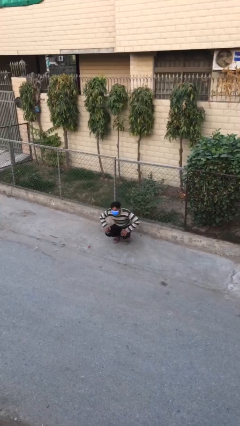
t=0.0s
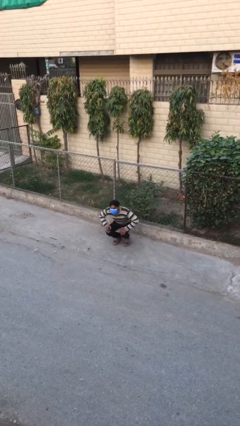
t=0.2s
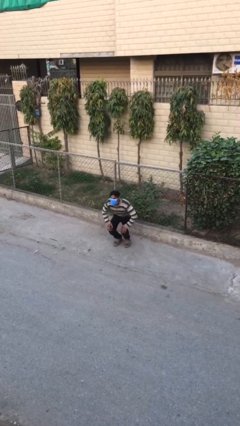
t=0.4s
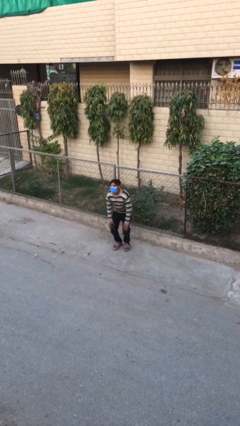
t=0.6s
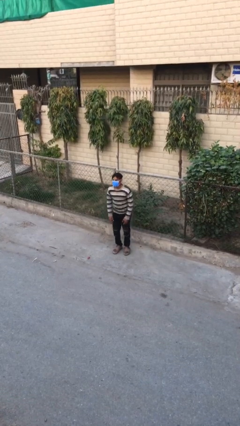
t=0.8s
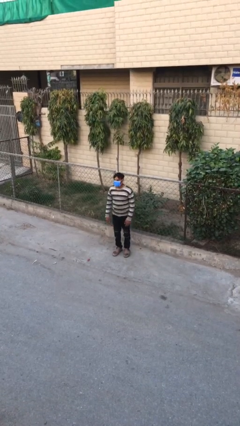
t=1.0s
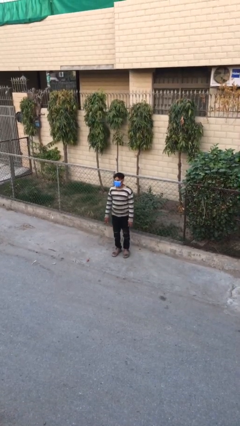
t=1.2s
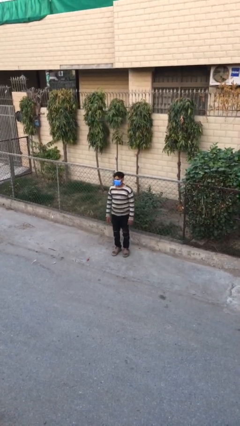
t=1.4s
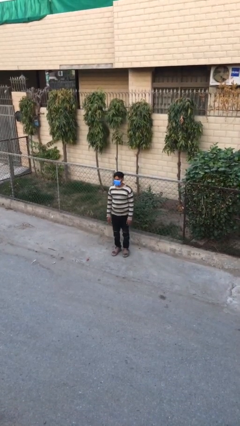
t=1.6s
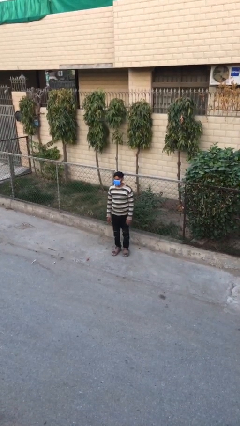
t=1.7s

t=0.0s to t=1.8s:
person stands up

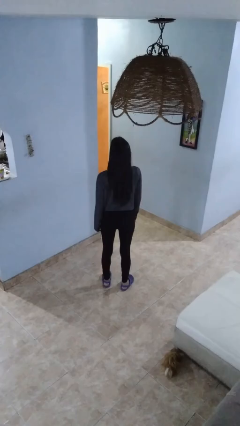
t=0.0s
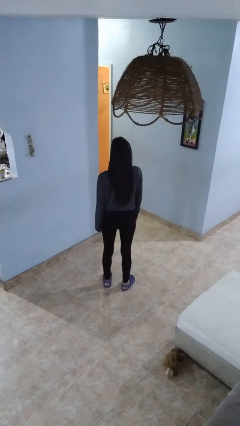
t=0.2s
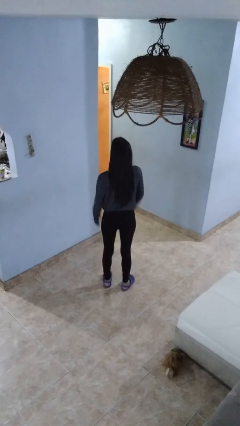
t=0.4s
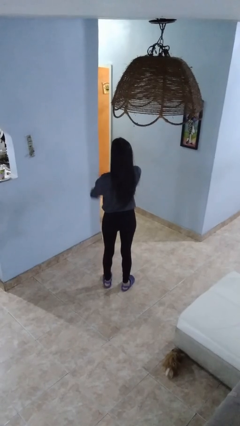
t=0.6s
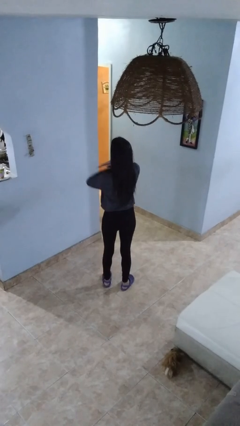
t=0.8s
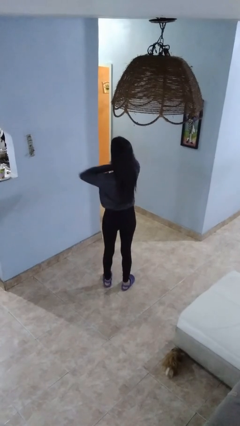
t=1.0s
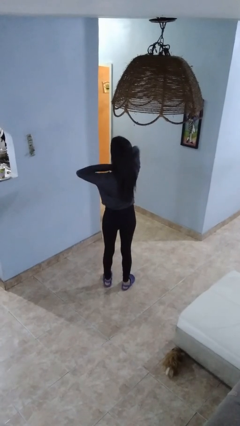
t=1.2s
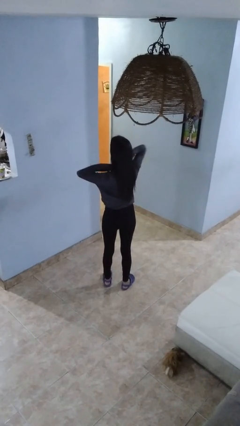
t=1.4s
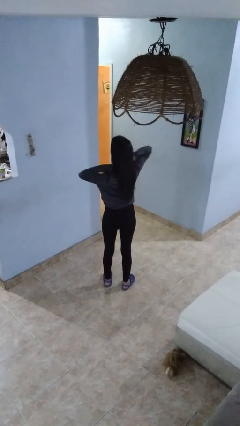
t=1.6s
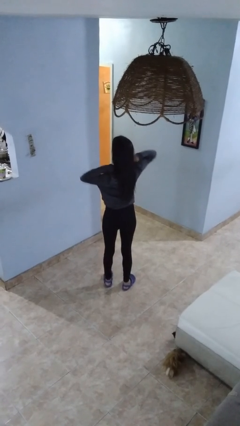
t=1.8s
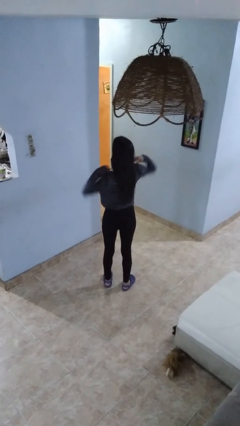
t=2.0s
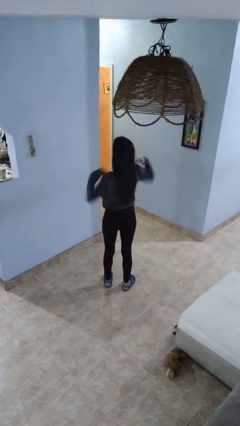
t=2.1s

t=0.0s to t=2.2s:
person gestures cut

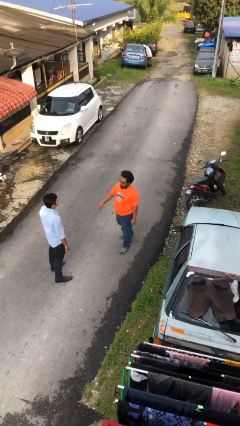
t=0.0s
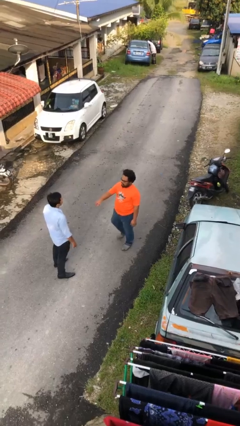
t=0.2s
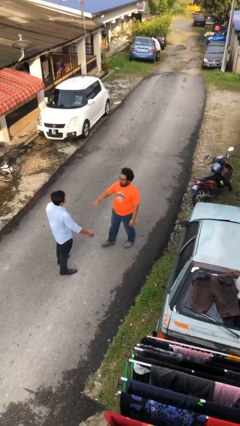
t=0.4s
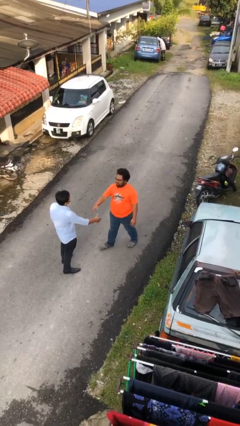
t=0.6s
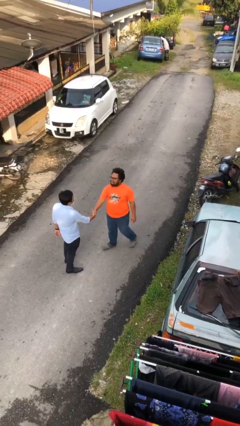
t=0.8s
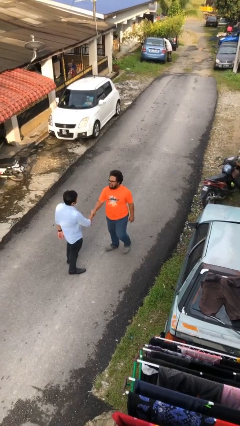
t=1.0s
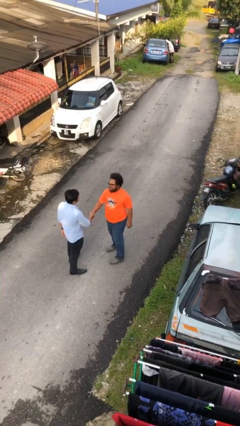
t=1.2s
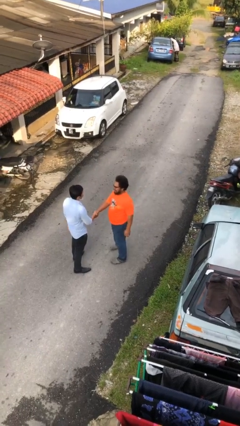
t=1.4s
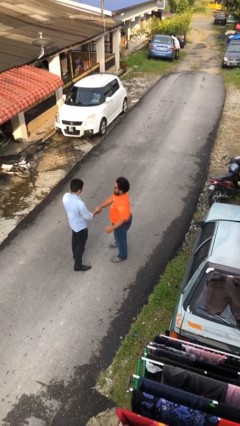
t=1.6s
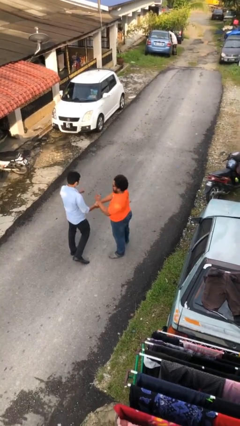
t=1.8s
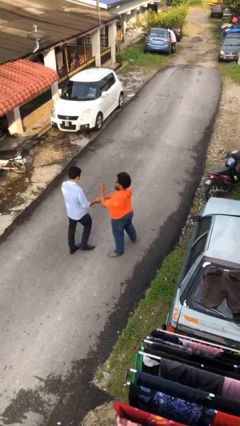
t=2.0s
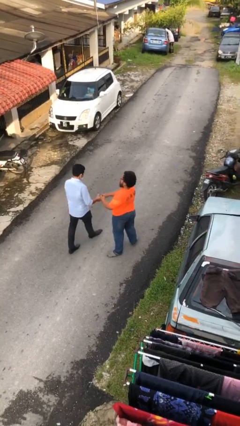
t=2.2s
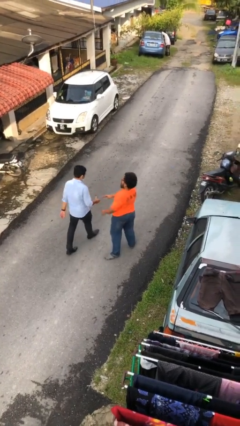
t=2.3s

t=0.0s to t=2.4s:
person shakes hand

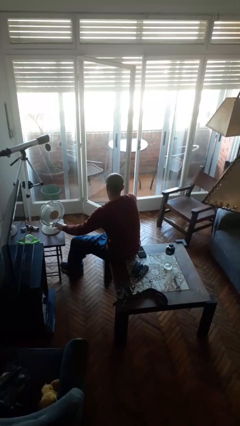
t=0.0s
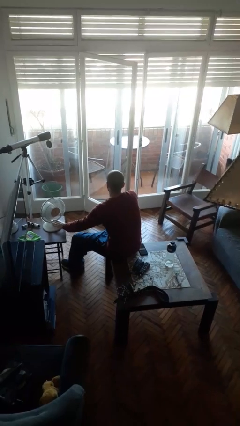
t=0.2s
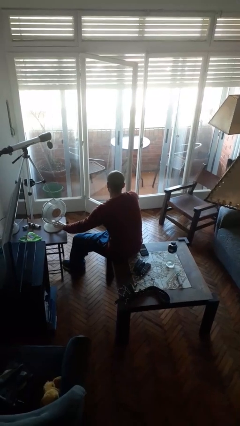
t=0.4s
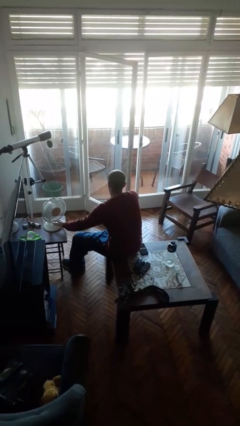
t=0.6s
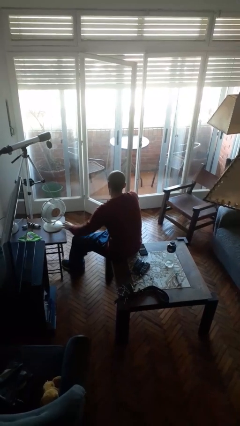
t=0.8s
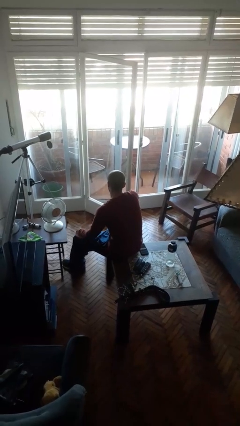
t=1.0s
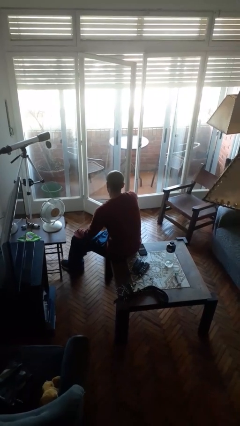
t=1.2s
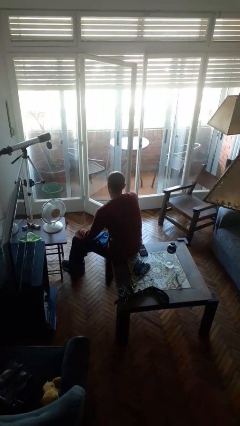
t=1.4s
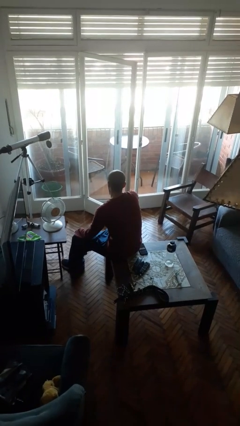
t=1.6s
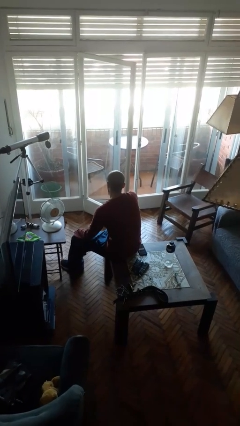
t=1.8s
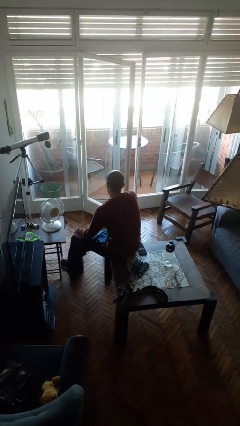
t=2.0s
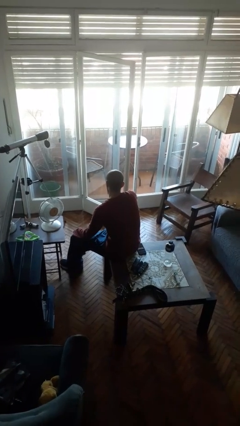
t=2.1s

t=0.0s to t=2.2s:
person turns off fan

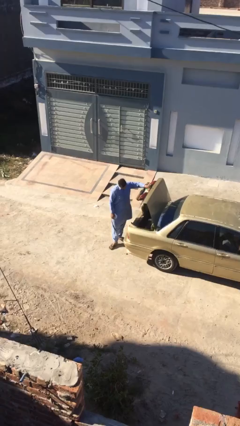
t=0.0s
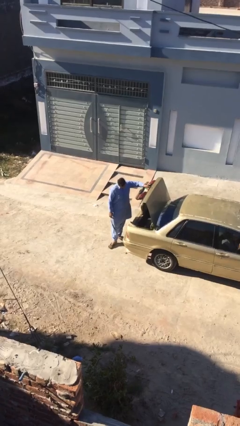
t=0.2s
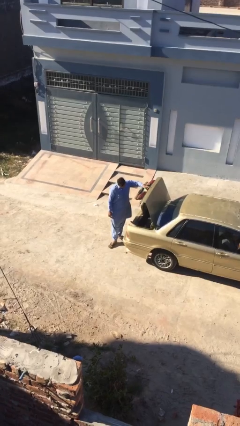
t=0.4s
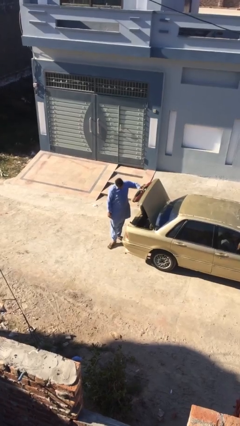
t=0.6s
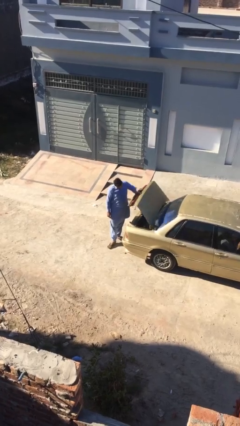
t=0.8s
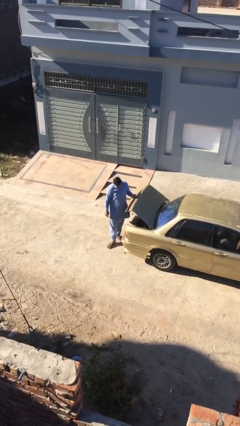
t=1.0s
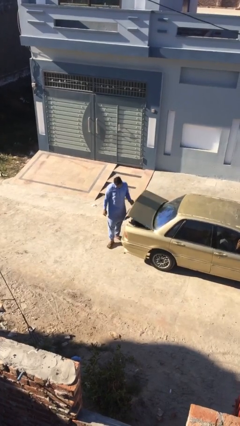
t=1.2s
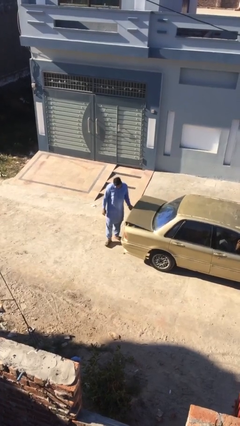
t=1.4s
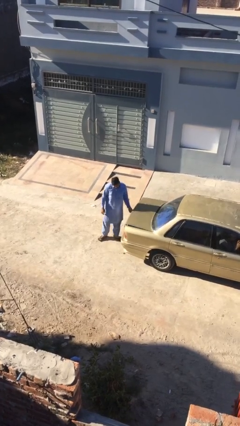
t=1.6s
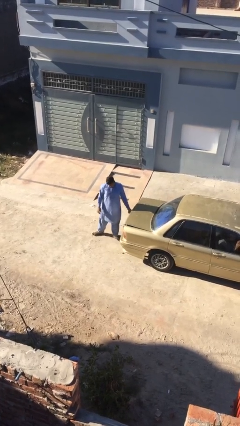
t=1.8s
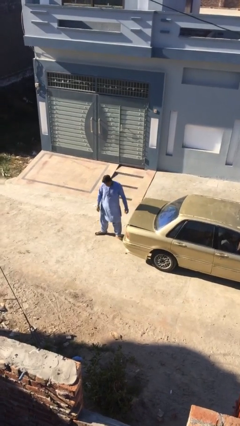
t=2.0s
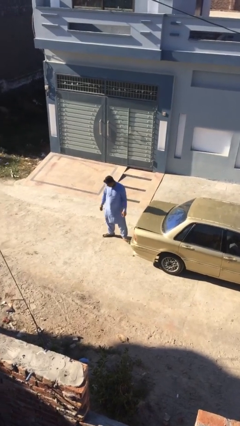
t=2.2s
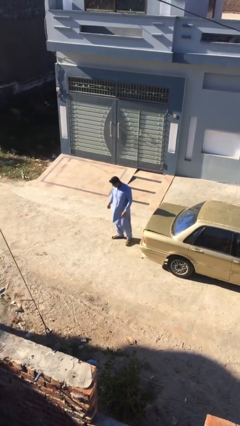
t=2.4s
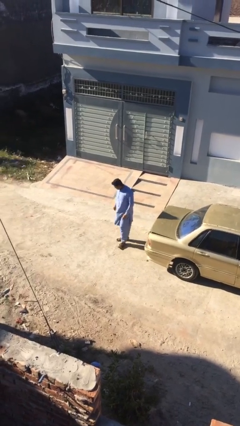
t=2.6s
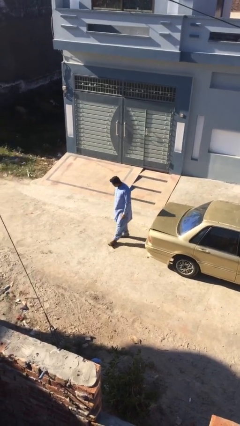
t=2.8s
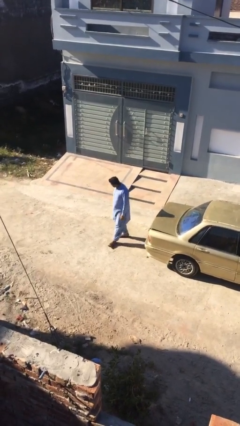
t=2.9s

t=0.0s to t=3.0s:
person closes car trunk

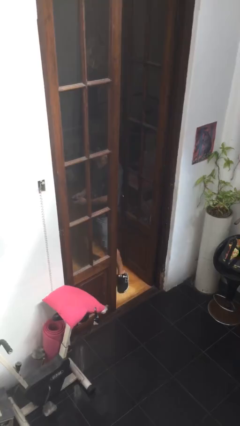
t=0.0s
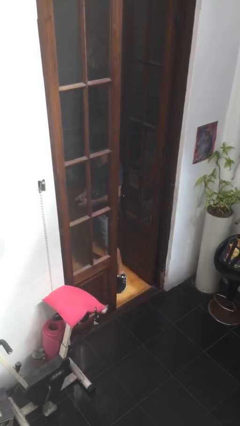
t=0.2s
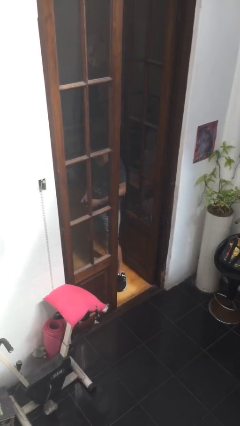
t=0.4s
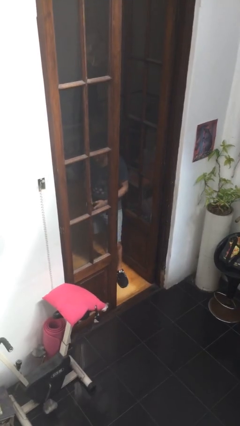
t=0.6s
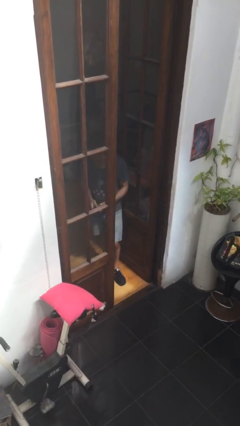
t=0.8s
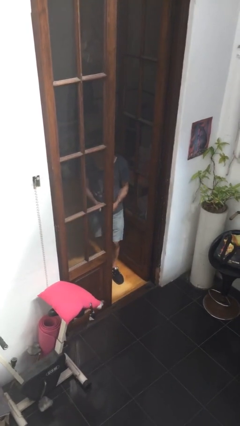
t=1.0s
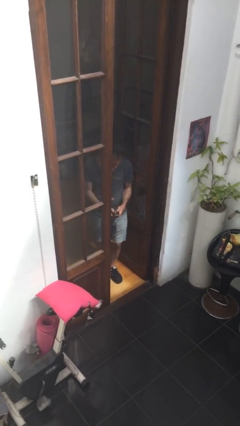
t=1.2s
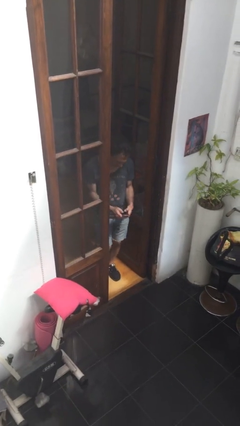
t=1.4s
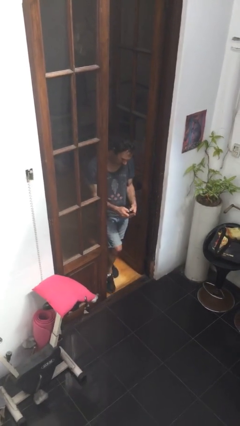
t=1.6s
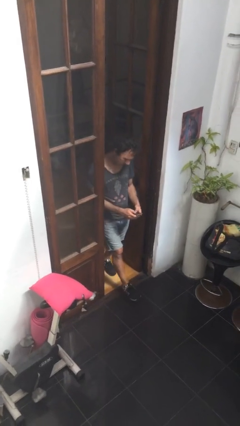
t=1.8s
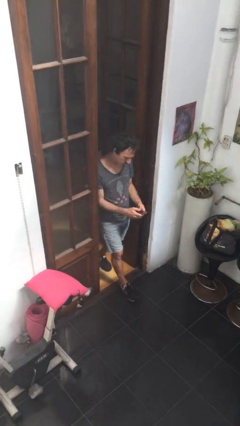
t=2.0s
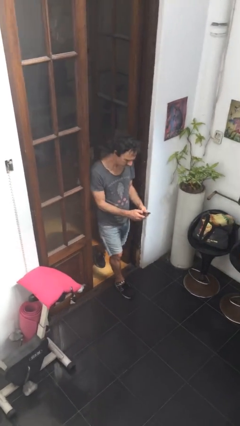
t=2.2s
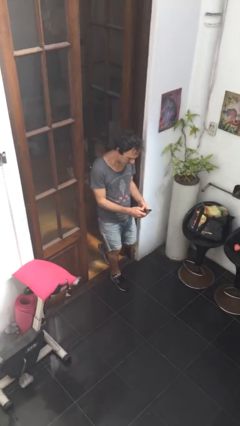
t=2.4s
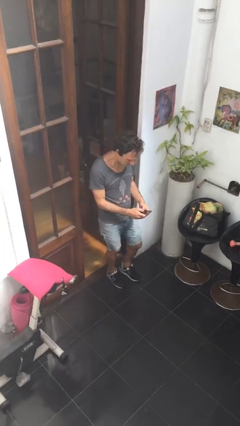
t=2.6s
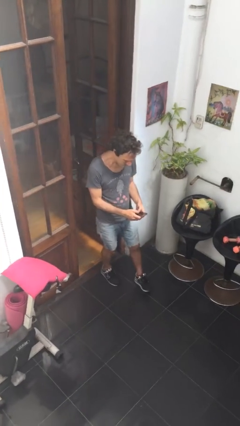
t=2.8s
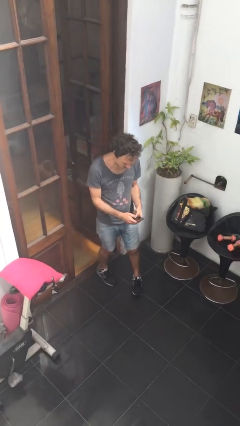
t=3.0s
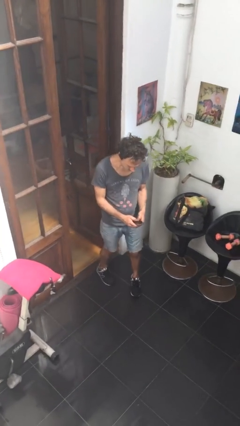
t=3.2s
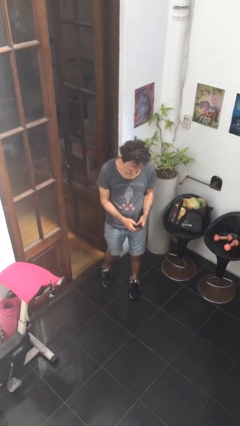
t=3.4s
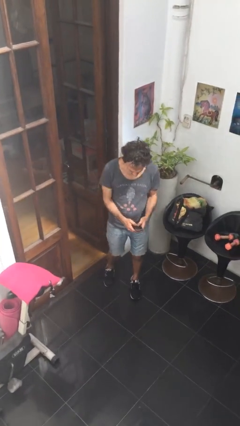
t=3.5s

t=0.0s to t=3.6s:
person enters scene through structure

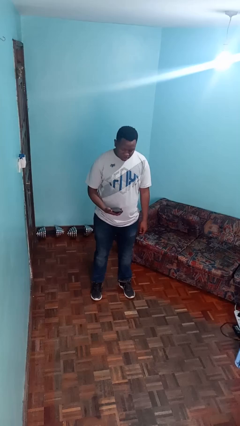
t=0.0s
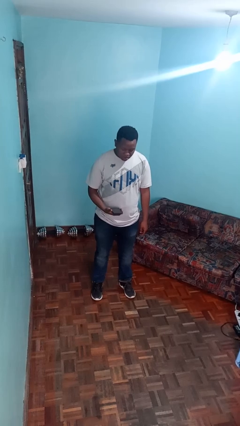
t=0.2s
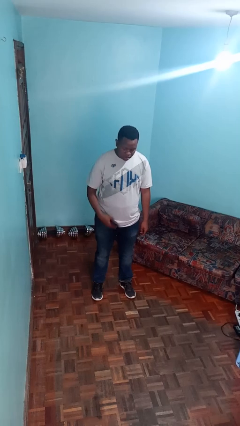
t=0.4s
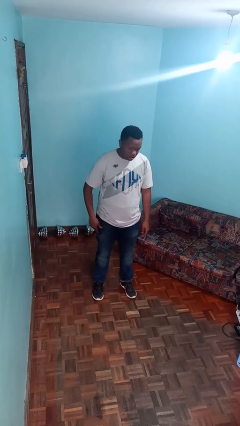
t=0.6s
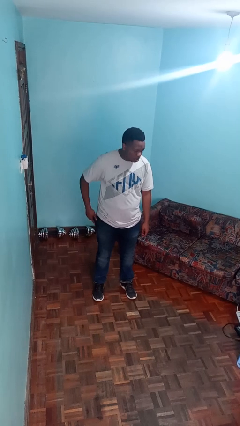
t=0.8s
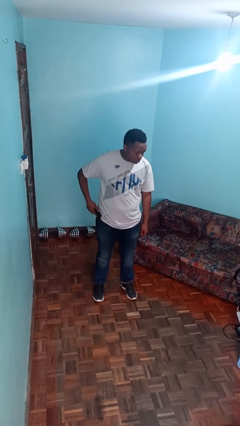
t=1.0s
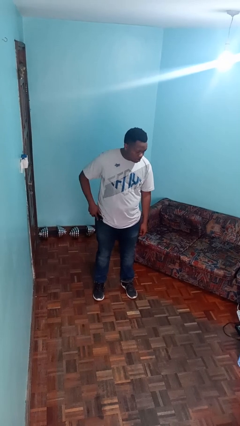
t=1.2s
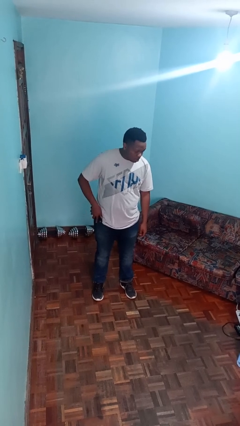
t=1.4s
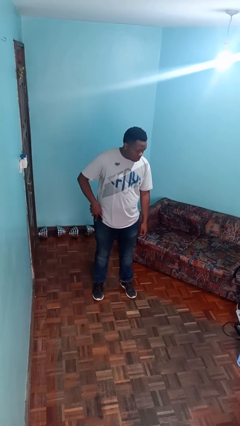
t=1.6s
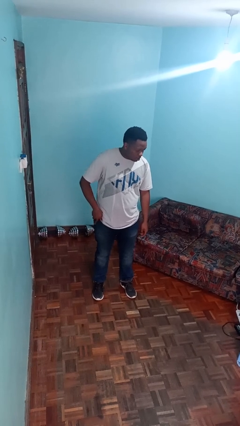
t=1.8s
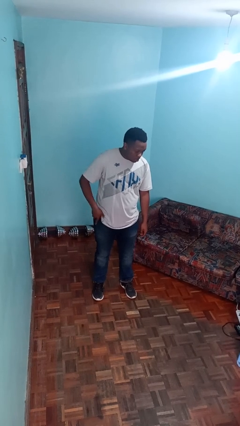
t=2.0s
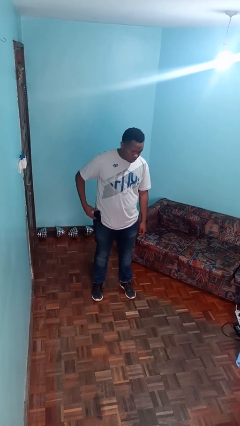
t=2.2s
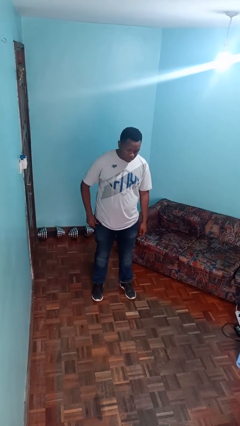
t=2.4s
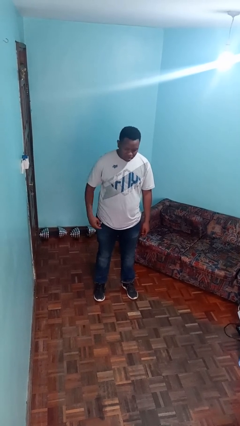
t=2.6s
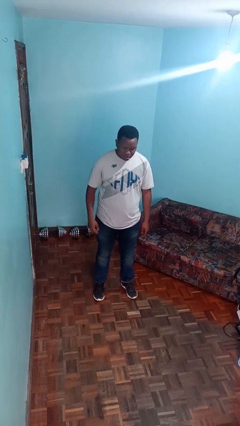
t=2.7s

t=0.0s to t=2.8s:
person puts phone into pocket
